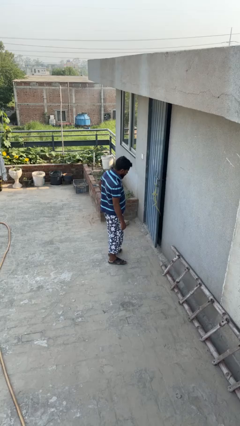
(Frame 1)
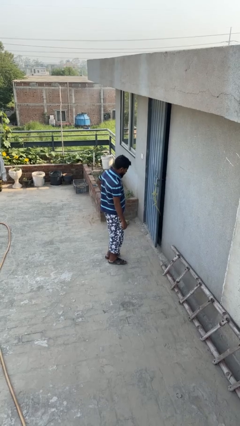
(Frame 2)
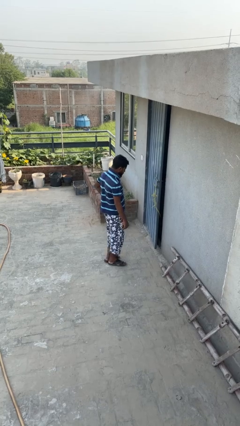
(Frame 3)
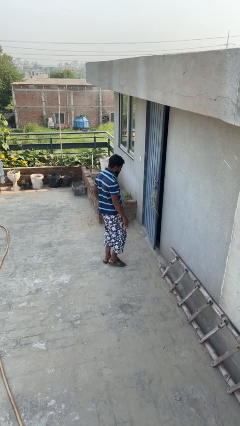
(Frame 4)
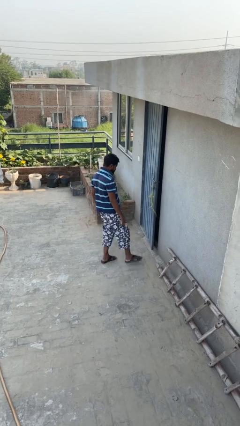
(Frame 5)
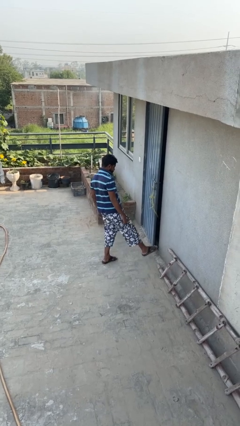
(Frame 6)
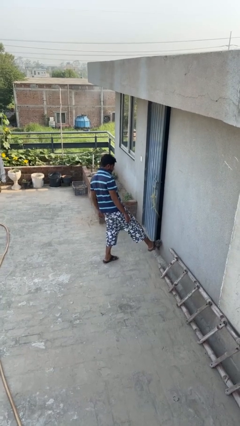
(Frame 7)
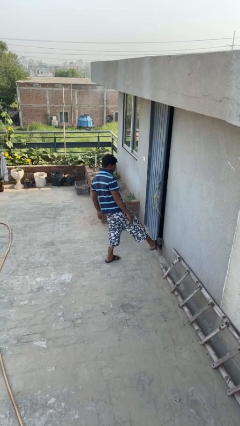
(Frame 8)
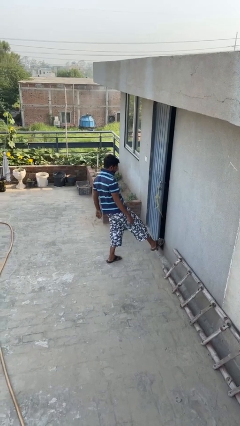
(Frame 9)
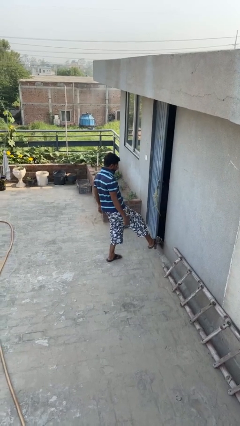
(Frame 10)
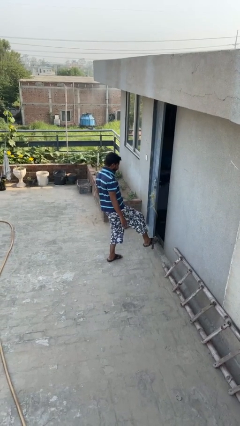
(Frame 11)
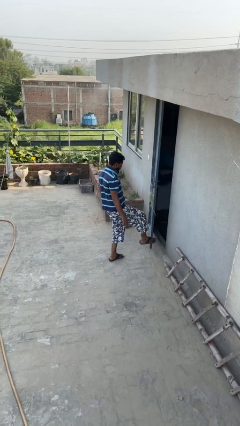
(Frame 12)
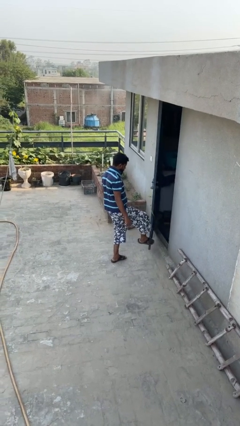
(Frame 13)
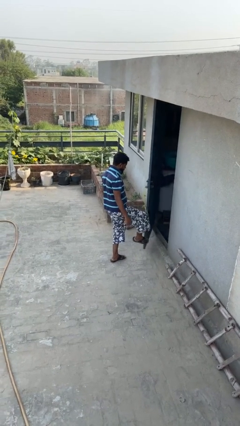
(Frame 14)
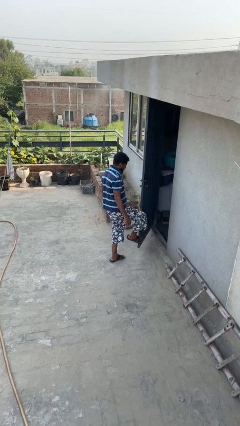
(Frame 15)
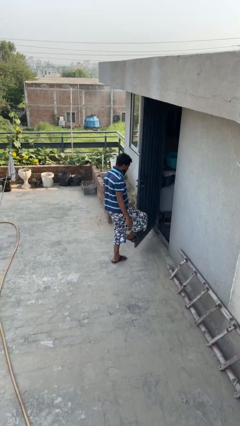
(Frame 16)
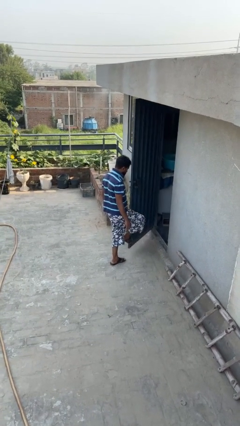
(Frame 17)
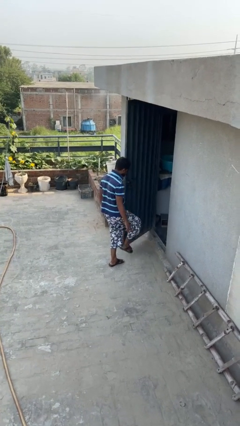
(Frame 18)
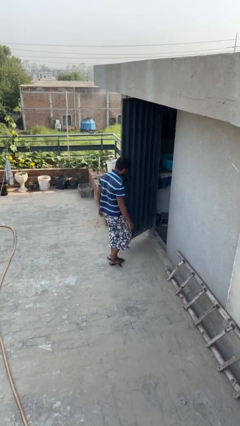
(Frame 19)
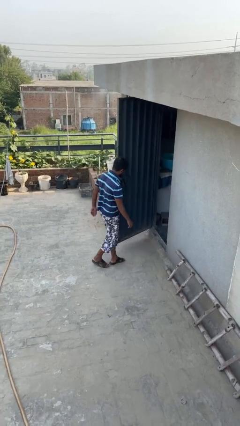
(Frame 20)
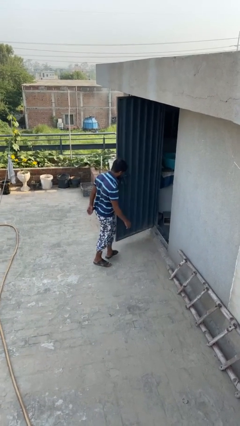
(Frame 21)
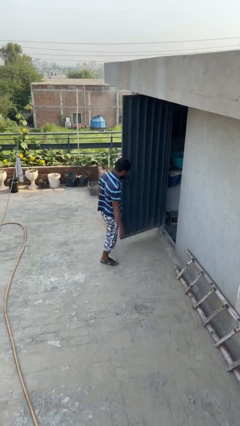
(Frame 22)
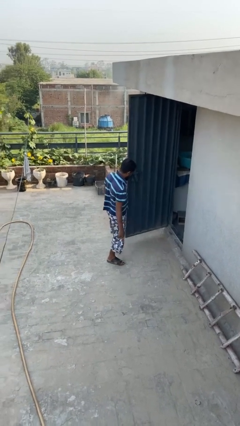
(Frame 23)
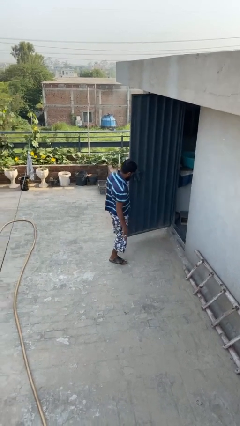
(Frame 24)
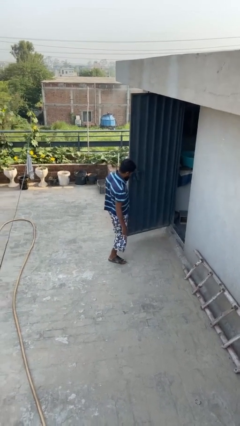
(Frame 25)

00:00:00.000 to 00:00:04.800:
person opens facility door

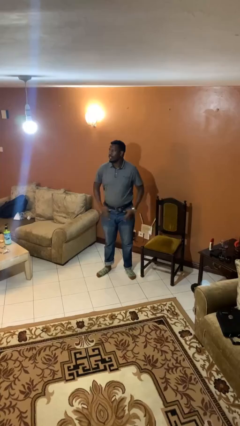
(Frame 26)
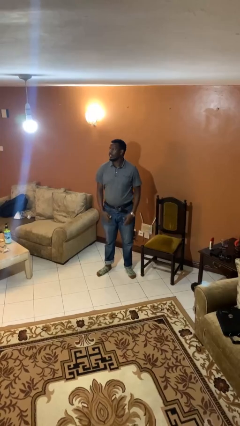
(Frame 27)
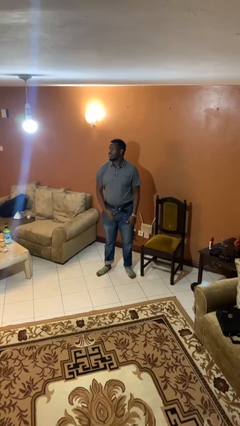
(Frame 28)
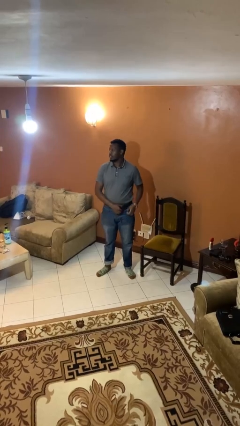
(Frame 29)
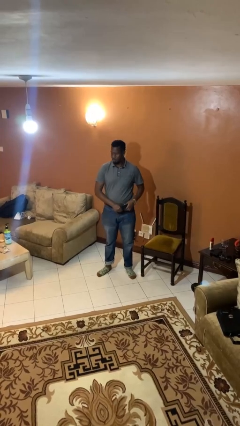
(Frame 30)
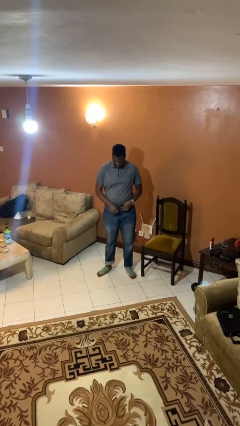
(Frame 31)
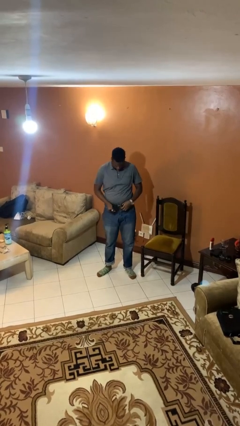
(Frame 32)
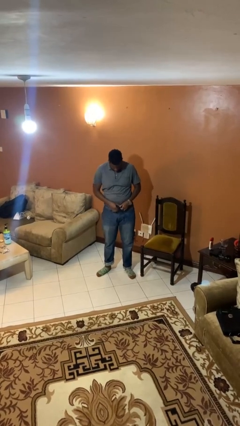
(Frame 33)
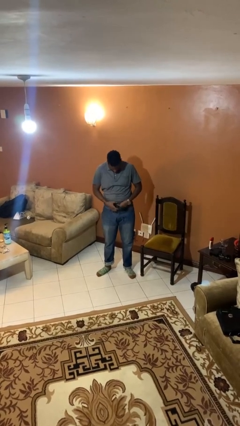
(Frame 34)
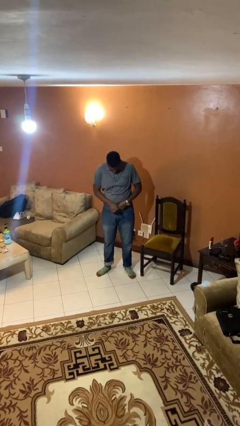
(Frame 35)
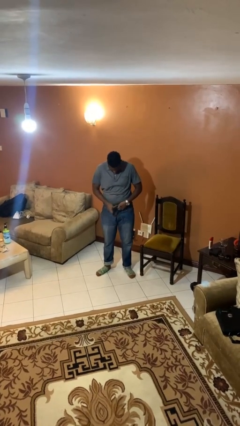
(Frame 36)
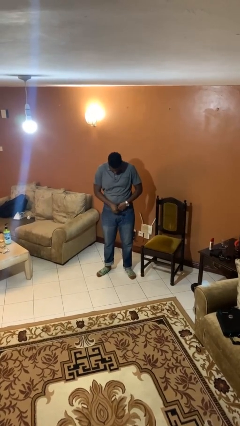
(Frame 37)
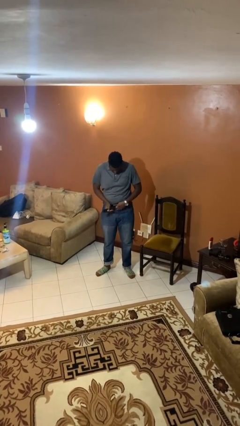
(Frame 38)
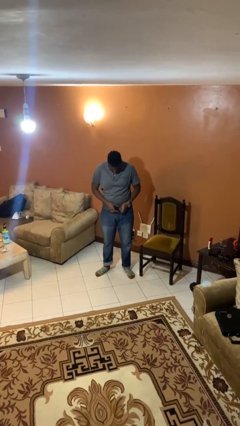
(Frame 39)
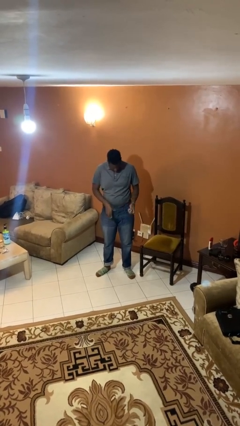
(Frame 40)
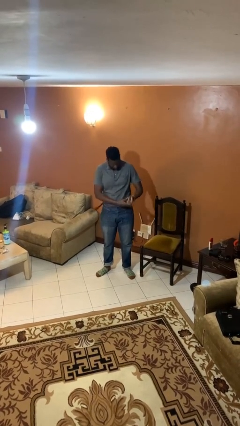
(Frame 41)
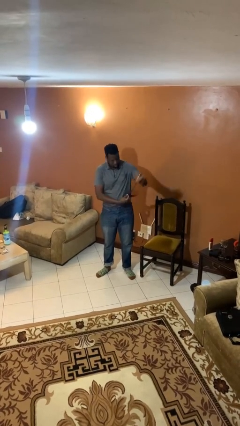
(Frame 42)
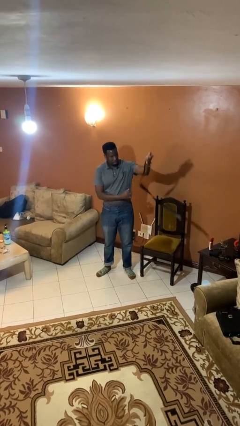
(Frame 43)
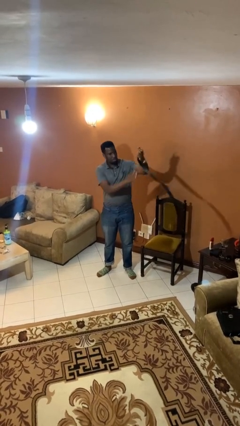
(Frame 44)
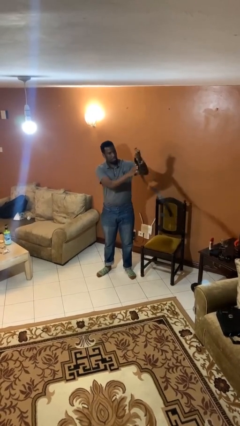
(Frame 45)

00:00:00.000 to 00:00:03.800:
person takes off belt

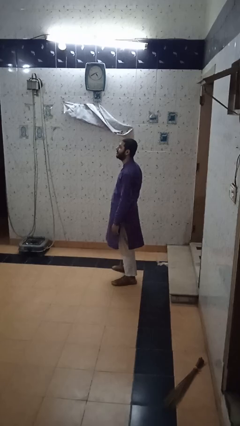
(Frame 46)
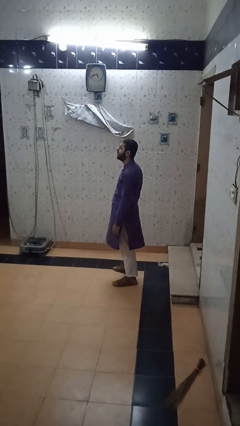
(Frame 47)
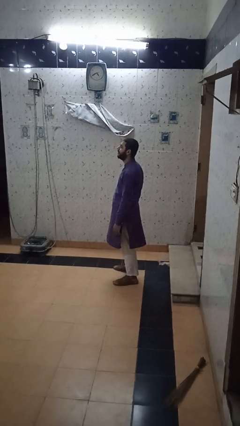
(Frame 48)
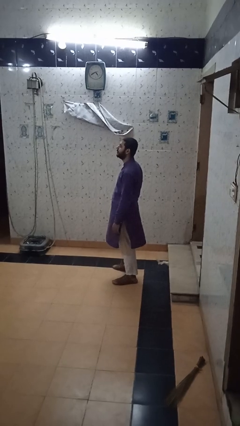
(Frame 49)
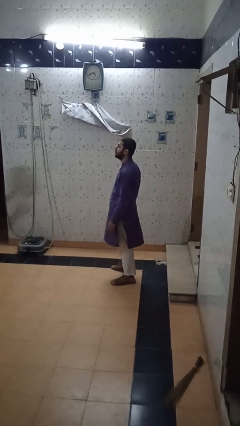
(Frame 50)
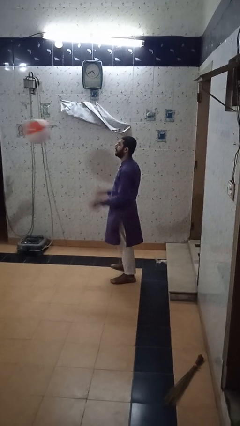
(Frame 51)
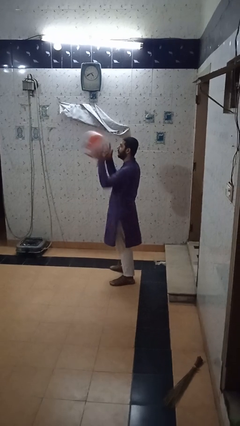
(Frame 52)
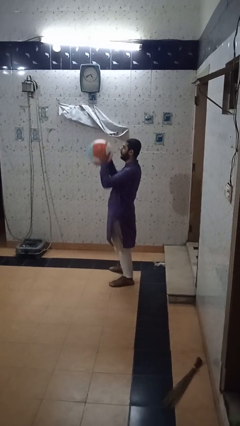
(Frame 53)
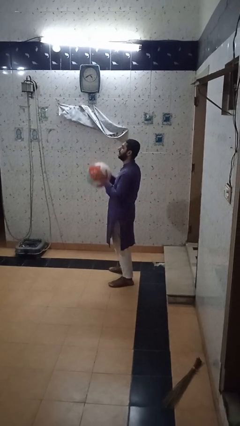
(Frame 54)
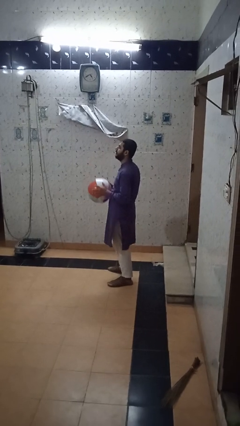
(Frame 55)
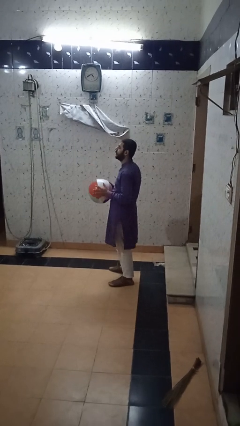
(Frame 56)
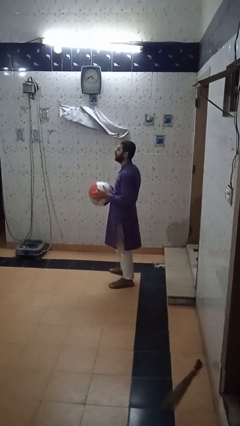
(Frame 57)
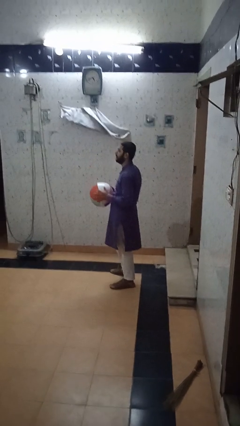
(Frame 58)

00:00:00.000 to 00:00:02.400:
person catches object from person

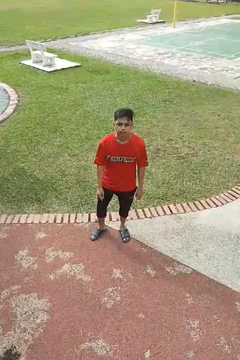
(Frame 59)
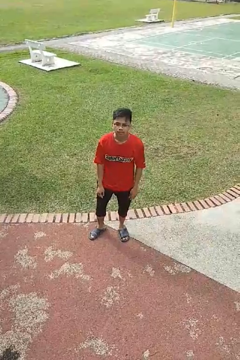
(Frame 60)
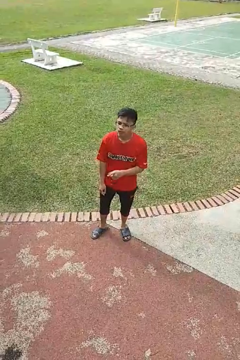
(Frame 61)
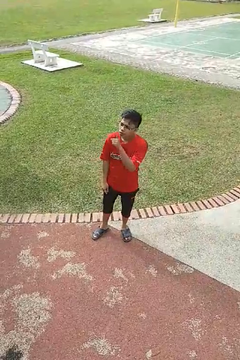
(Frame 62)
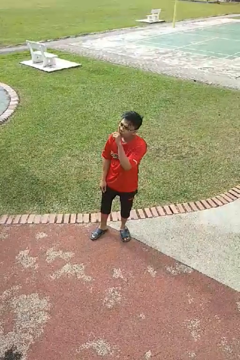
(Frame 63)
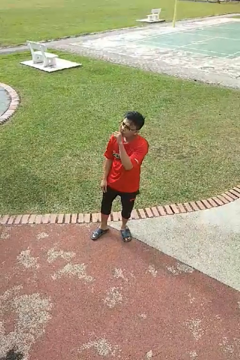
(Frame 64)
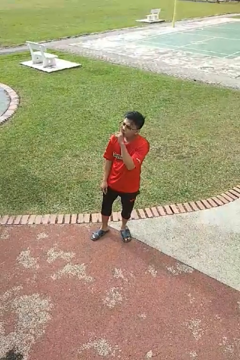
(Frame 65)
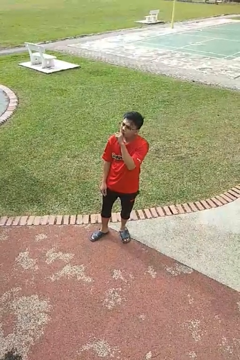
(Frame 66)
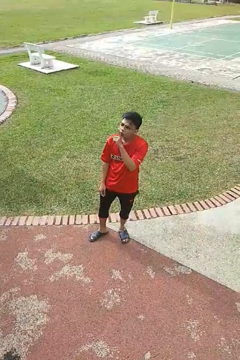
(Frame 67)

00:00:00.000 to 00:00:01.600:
person gestures be quiet

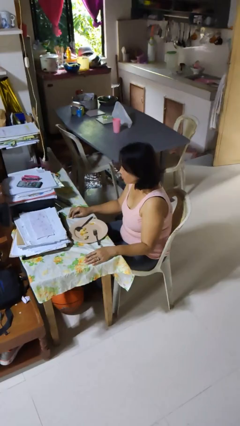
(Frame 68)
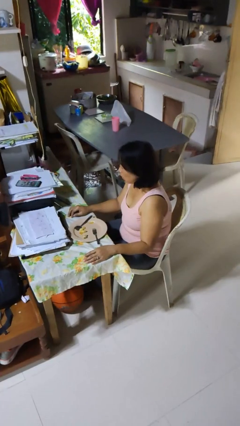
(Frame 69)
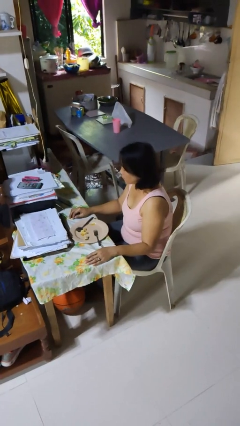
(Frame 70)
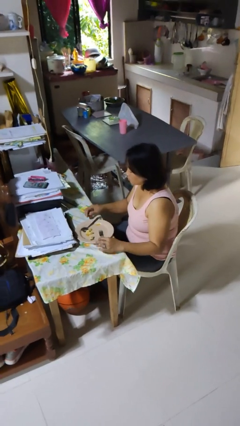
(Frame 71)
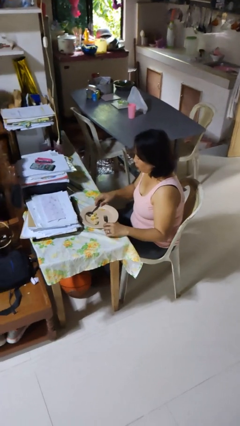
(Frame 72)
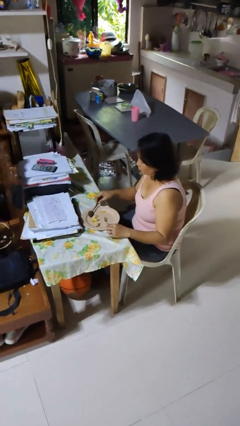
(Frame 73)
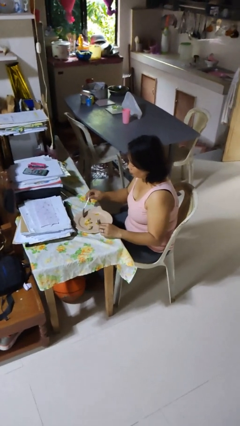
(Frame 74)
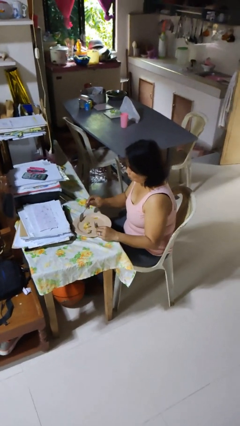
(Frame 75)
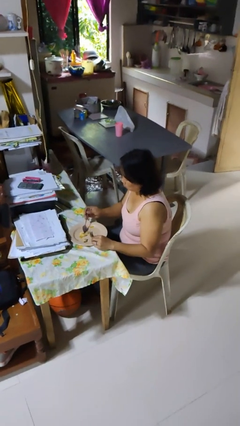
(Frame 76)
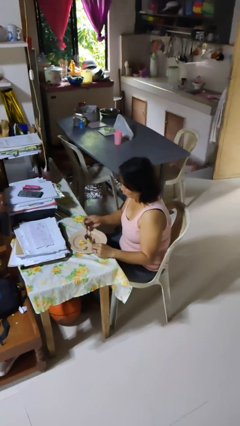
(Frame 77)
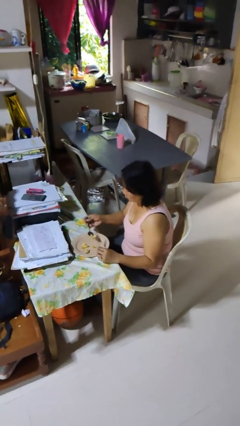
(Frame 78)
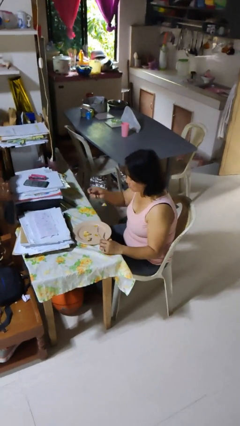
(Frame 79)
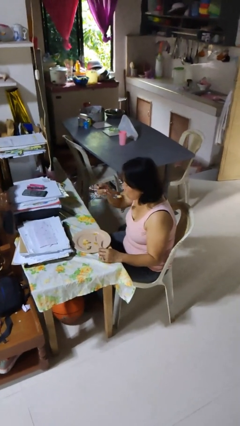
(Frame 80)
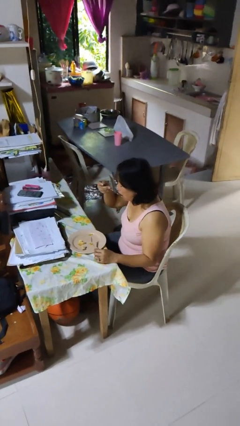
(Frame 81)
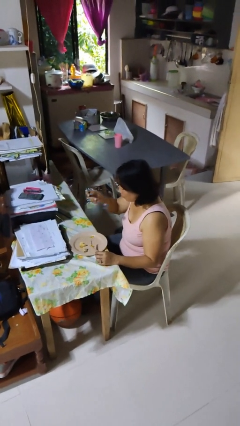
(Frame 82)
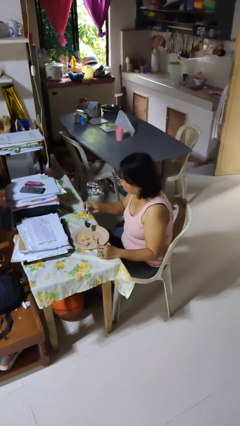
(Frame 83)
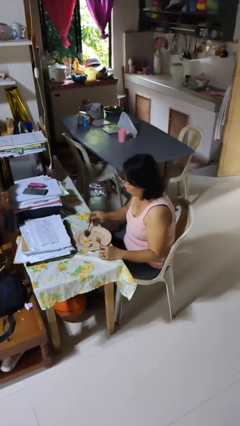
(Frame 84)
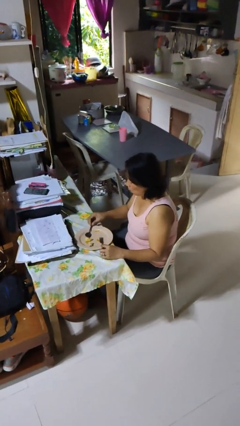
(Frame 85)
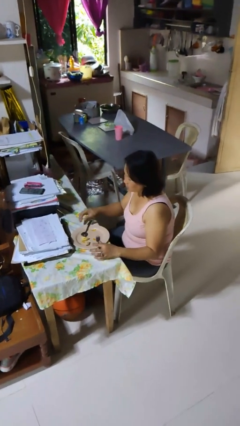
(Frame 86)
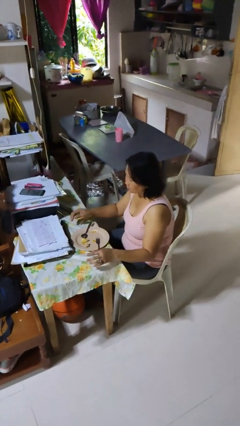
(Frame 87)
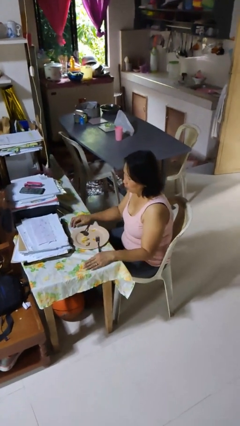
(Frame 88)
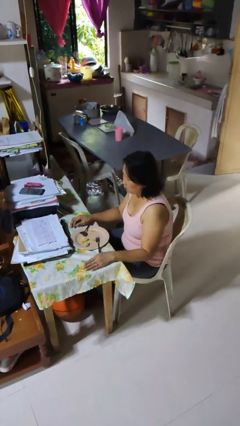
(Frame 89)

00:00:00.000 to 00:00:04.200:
person eats with utensil

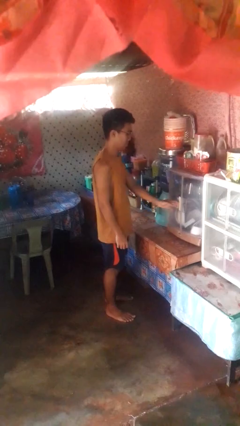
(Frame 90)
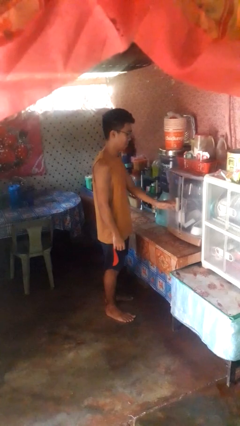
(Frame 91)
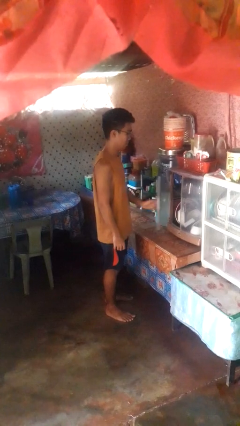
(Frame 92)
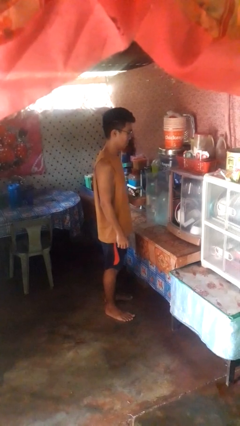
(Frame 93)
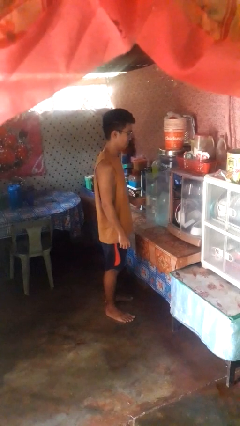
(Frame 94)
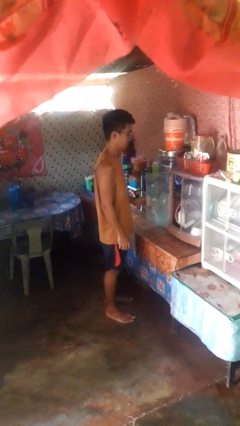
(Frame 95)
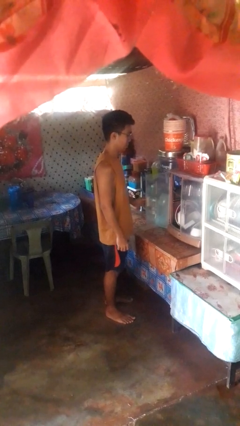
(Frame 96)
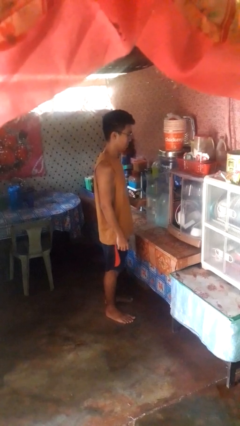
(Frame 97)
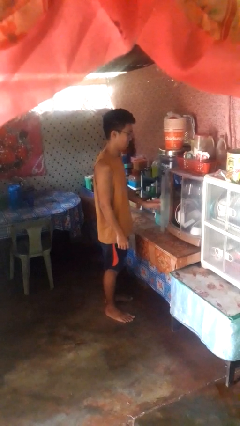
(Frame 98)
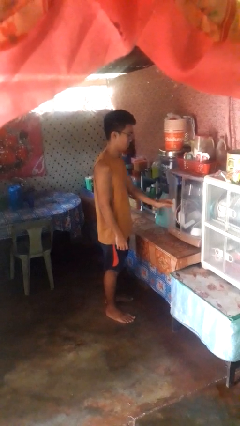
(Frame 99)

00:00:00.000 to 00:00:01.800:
person opens cabinet
